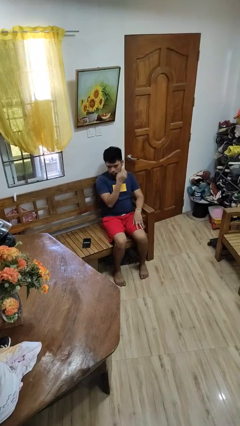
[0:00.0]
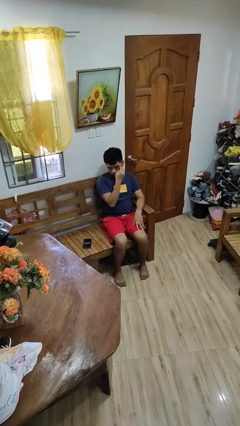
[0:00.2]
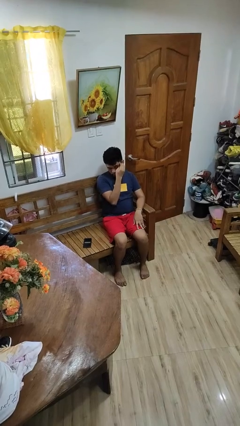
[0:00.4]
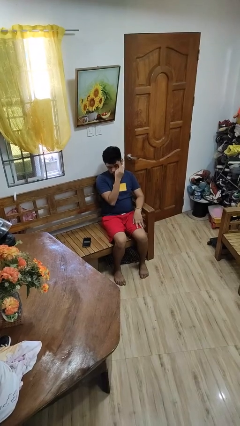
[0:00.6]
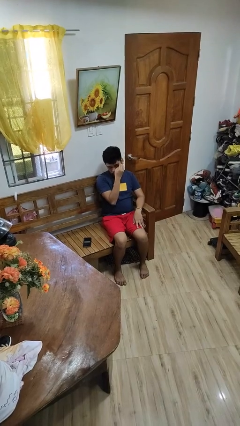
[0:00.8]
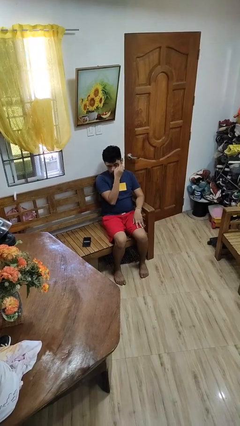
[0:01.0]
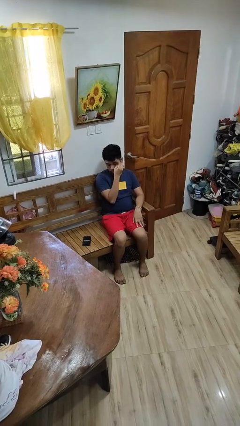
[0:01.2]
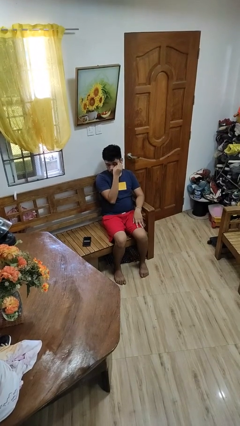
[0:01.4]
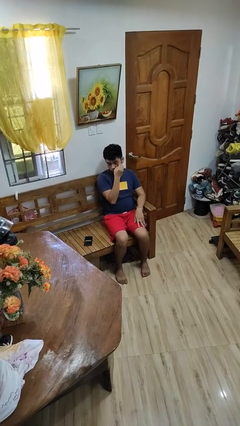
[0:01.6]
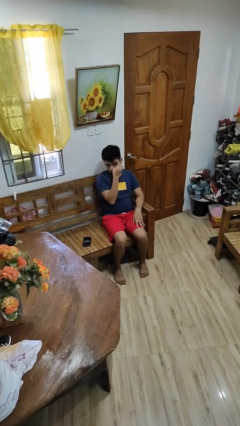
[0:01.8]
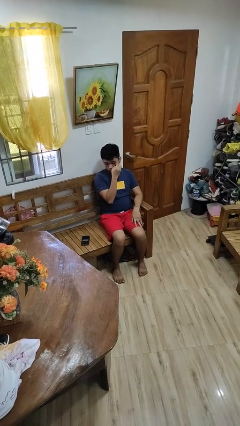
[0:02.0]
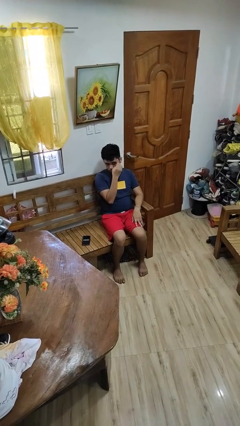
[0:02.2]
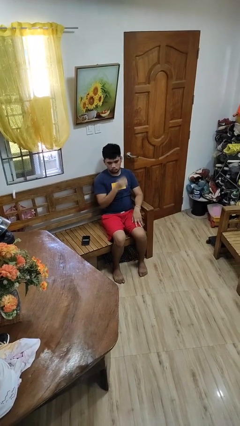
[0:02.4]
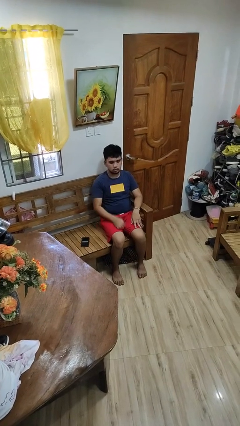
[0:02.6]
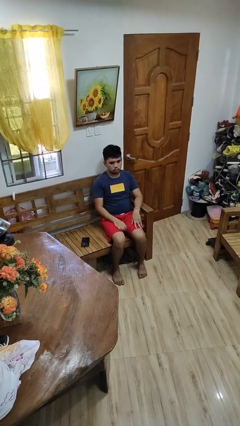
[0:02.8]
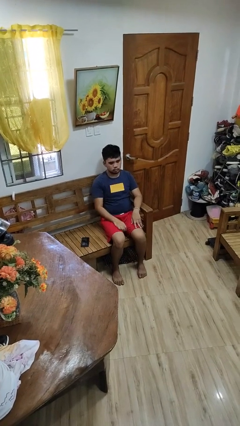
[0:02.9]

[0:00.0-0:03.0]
person scratches face

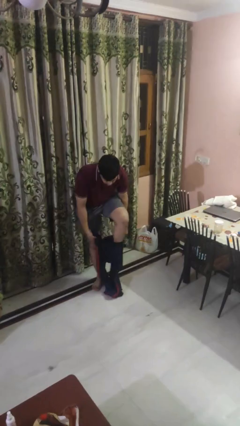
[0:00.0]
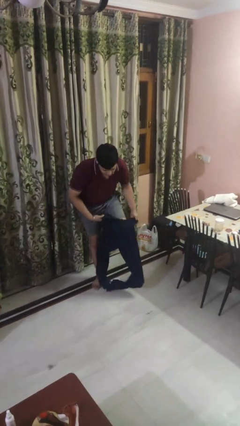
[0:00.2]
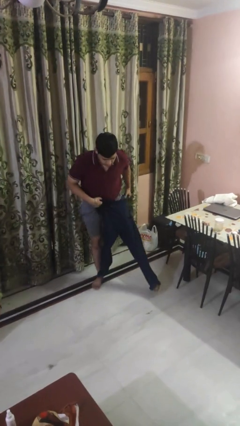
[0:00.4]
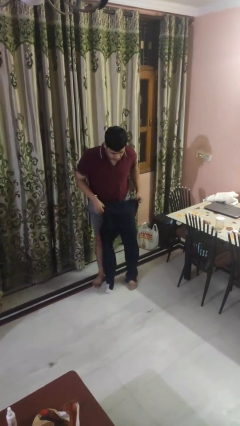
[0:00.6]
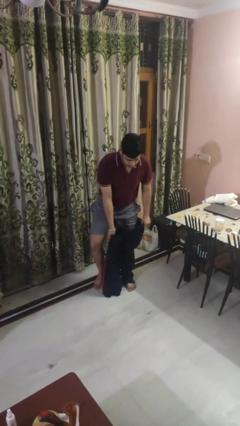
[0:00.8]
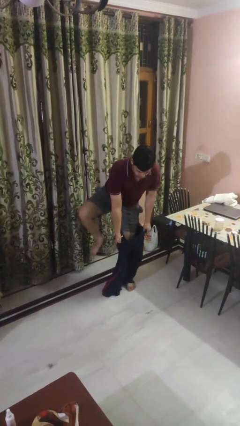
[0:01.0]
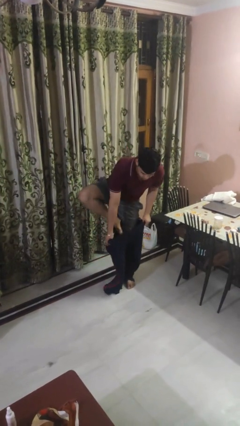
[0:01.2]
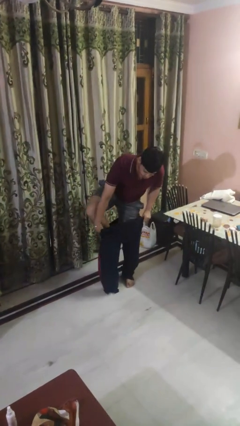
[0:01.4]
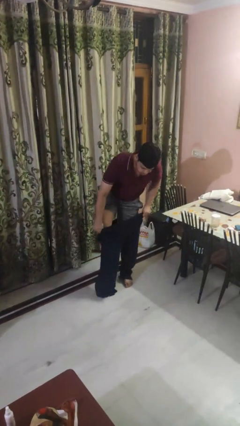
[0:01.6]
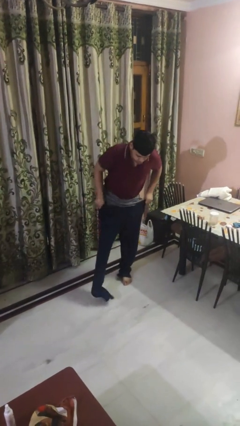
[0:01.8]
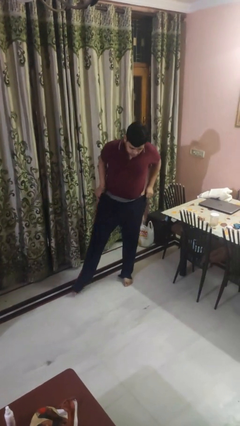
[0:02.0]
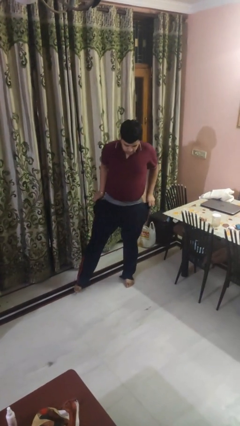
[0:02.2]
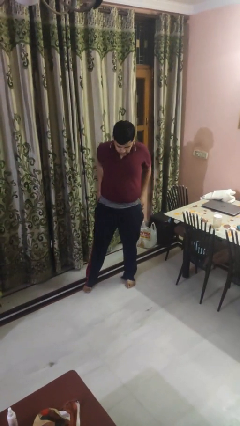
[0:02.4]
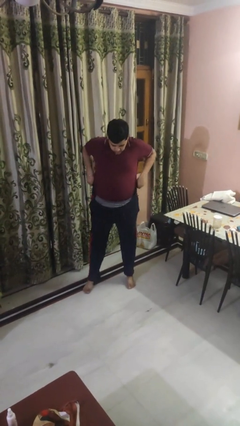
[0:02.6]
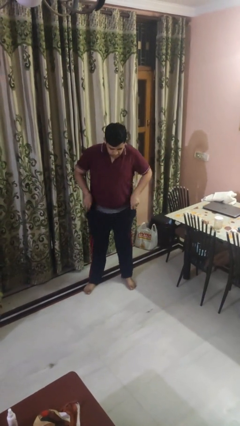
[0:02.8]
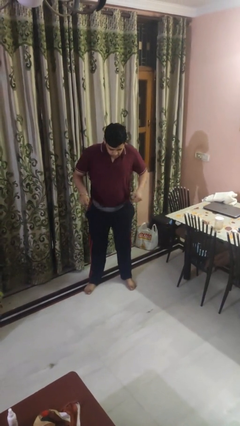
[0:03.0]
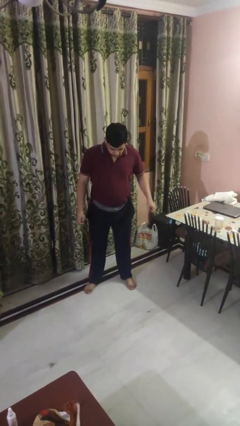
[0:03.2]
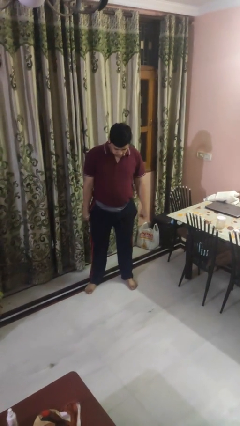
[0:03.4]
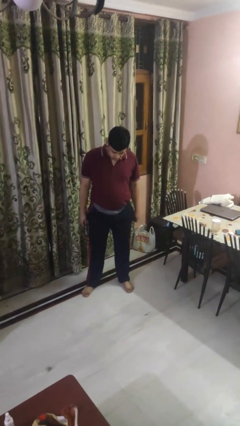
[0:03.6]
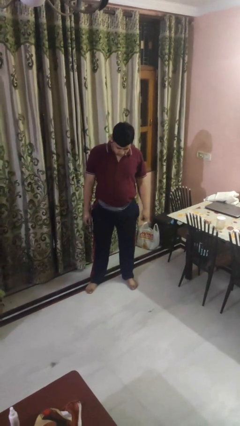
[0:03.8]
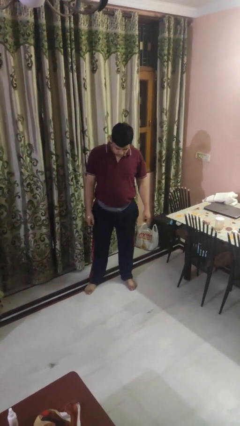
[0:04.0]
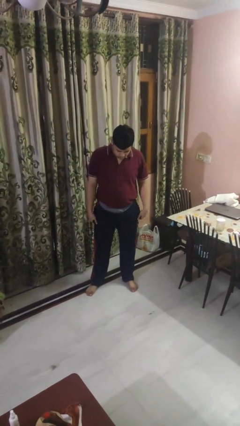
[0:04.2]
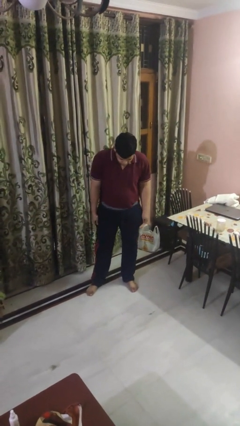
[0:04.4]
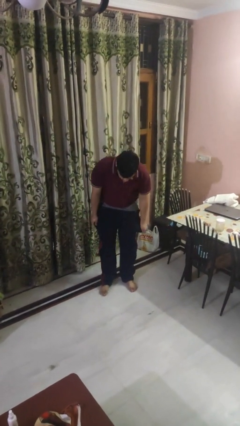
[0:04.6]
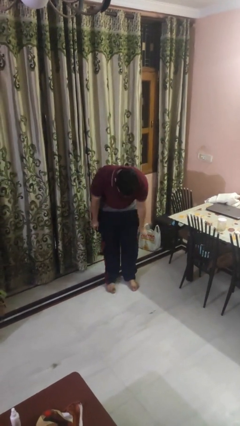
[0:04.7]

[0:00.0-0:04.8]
person puts on pants

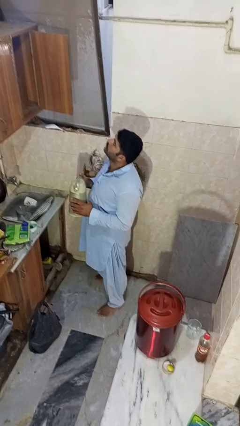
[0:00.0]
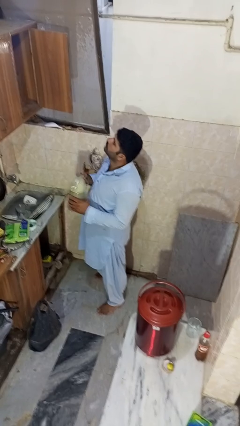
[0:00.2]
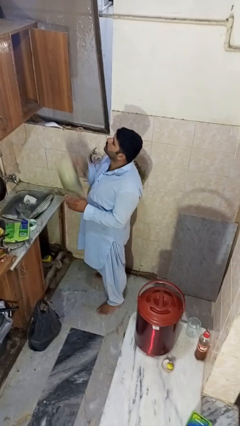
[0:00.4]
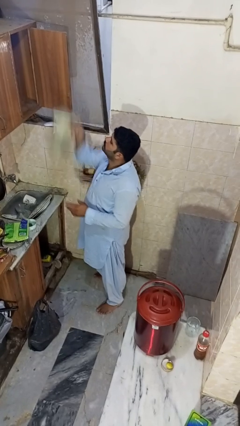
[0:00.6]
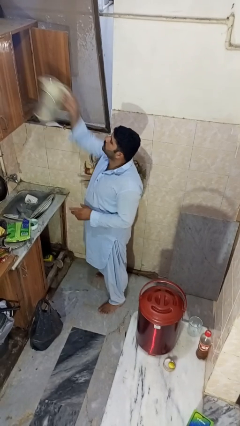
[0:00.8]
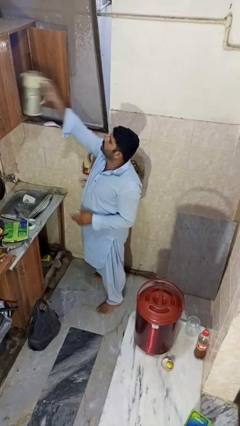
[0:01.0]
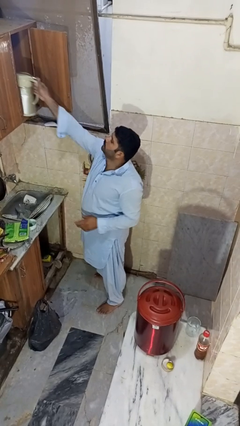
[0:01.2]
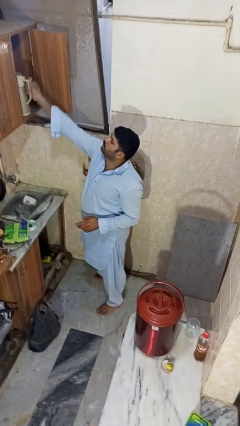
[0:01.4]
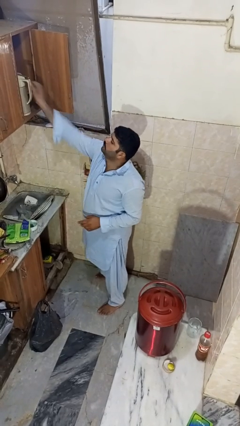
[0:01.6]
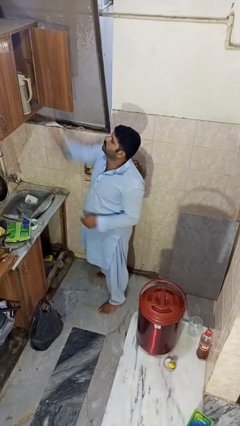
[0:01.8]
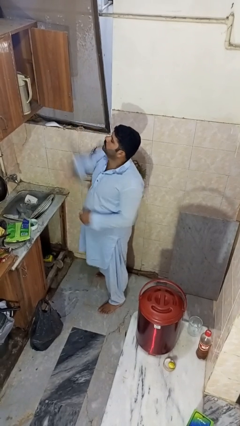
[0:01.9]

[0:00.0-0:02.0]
person puts object in cabinet

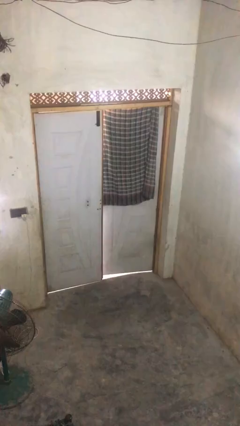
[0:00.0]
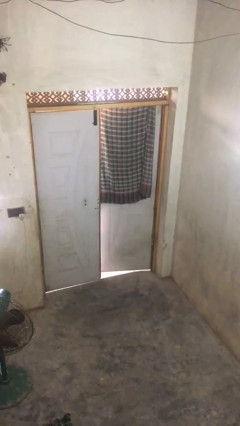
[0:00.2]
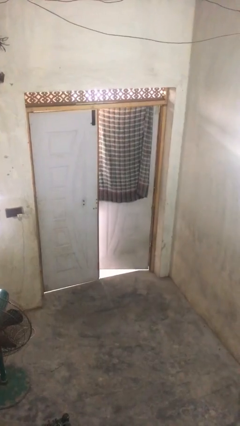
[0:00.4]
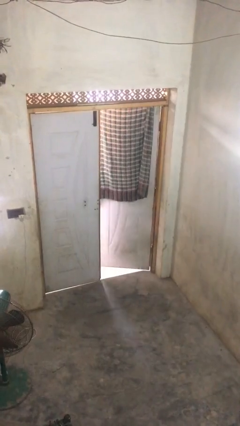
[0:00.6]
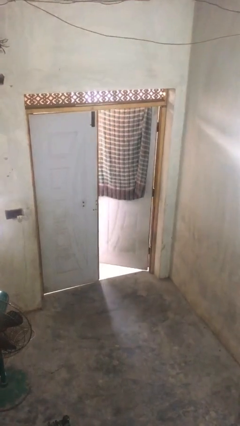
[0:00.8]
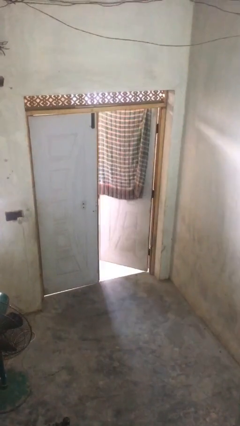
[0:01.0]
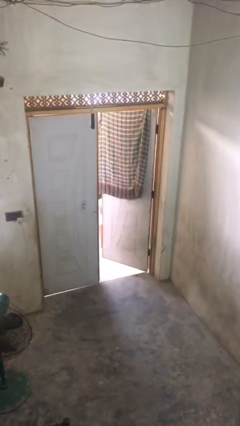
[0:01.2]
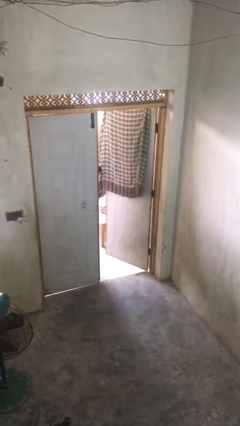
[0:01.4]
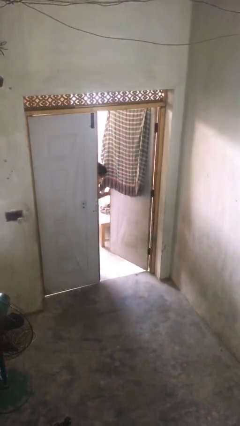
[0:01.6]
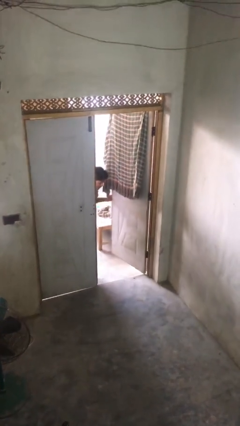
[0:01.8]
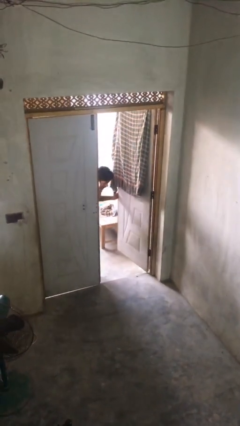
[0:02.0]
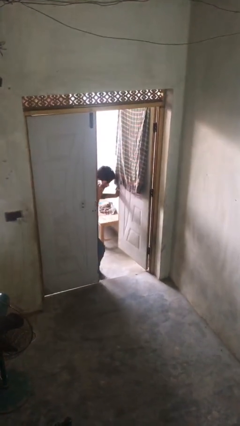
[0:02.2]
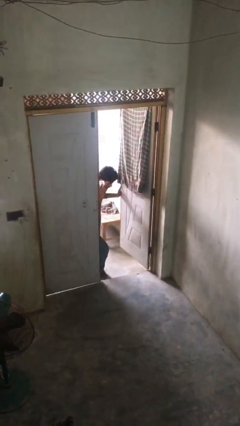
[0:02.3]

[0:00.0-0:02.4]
person opens facility door

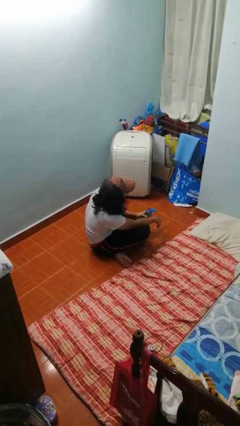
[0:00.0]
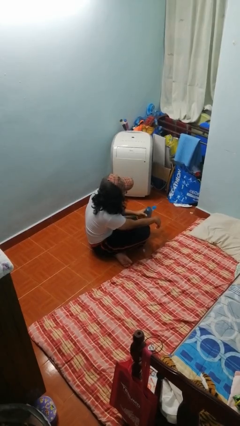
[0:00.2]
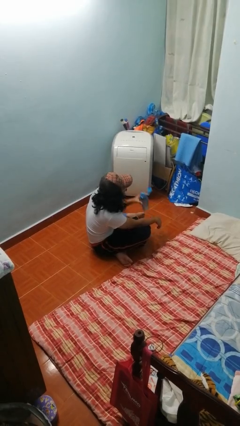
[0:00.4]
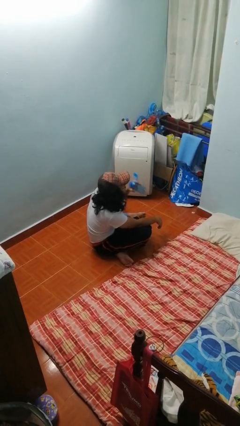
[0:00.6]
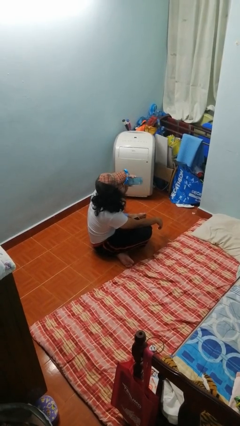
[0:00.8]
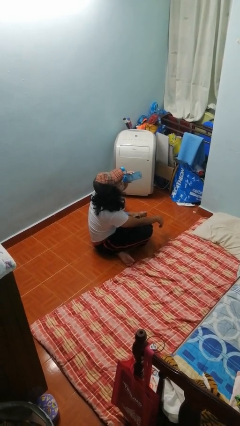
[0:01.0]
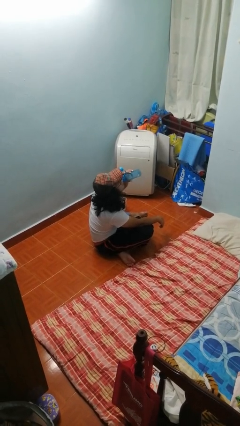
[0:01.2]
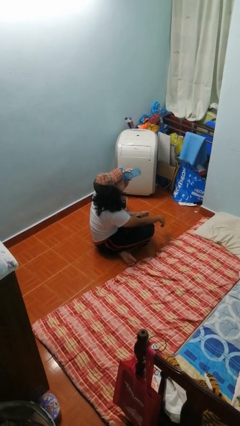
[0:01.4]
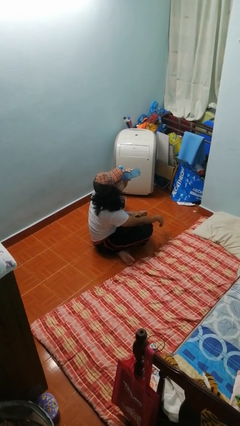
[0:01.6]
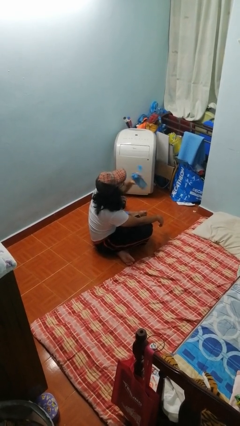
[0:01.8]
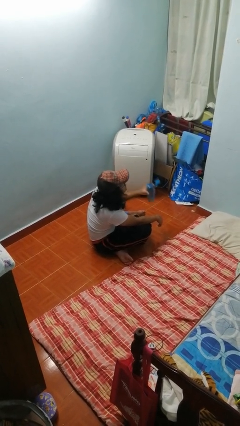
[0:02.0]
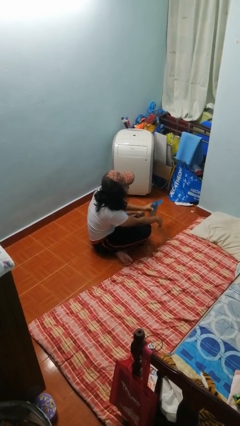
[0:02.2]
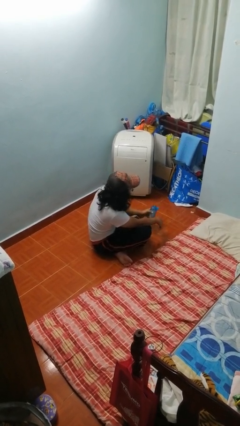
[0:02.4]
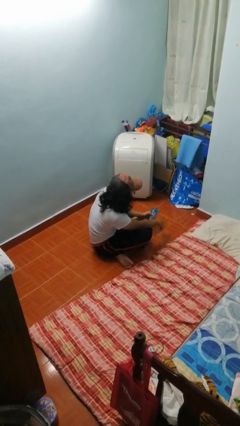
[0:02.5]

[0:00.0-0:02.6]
person drinks from bottle

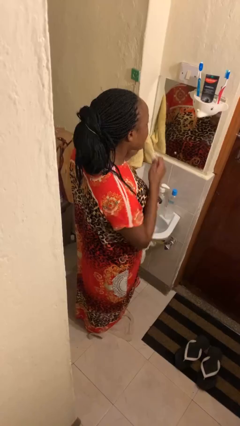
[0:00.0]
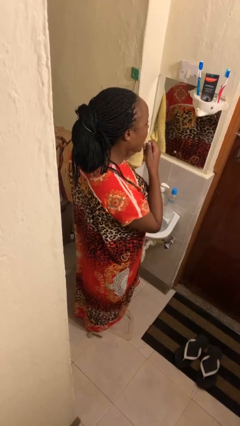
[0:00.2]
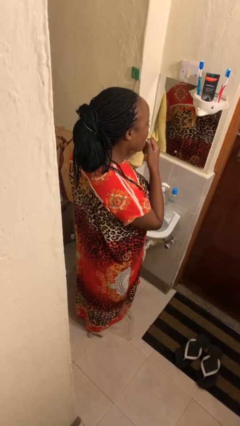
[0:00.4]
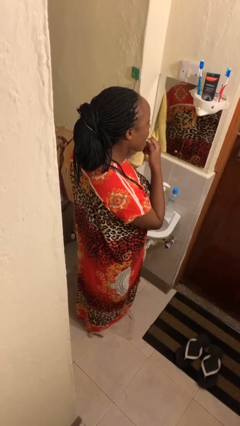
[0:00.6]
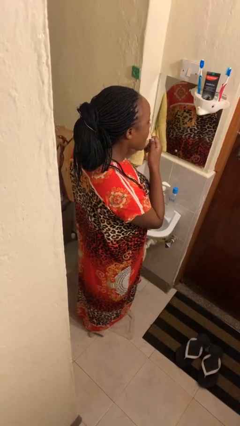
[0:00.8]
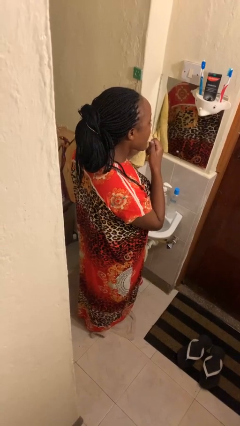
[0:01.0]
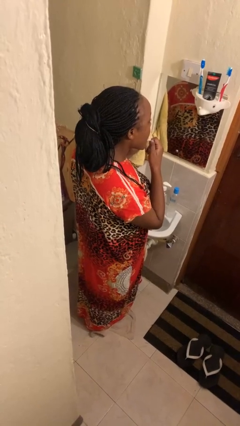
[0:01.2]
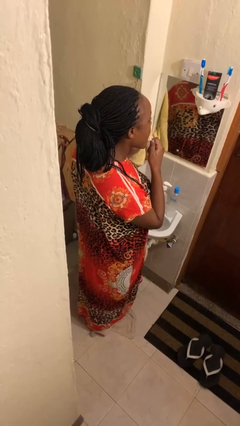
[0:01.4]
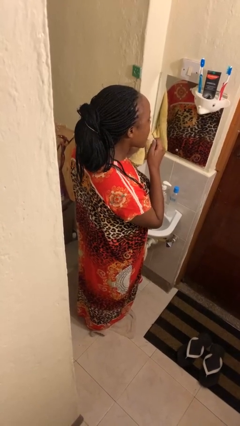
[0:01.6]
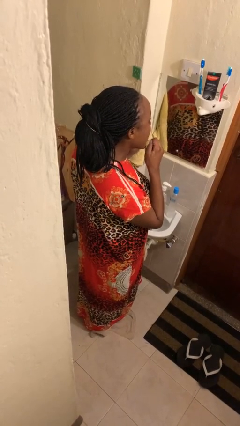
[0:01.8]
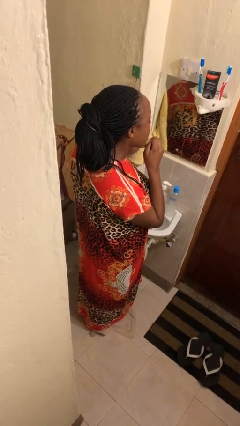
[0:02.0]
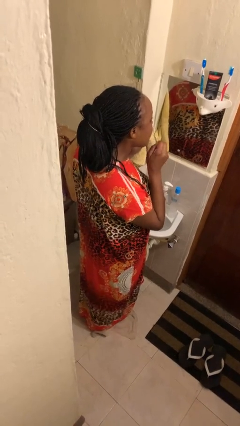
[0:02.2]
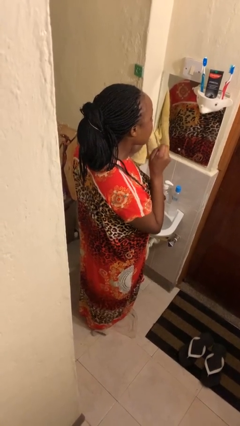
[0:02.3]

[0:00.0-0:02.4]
person flosses
